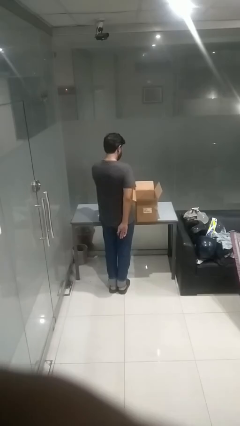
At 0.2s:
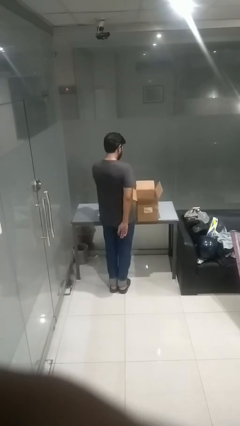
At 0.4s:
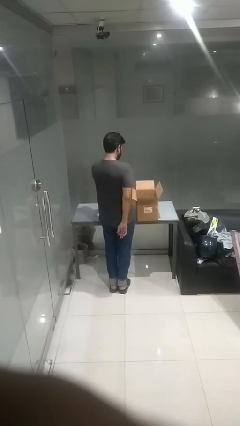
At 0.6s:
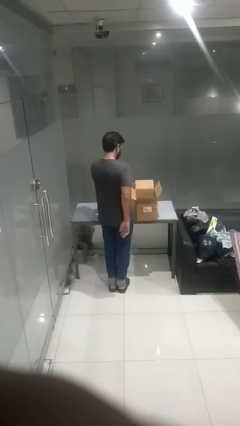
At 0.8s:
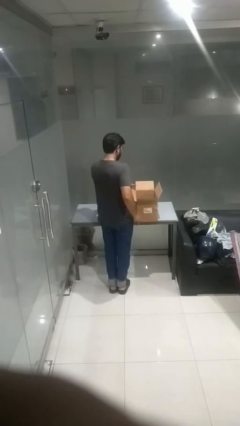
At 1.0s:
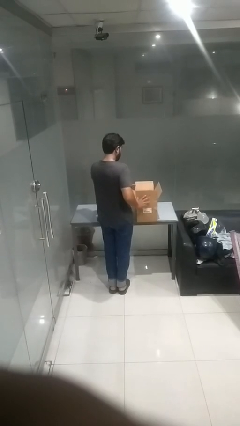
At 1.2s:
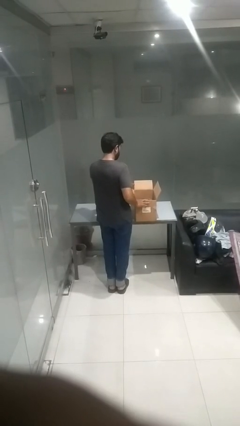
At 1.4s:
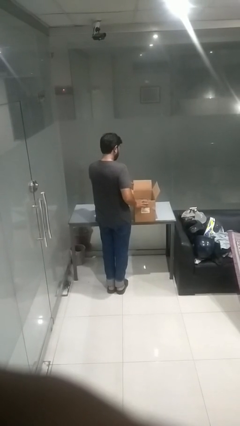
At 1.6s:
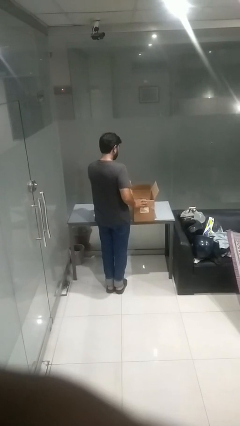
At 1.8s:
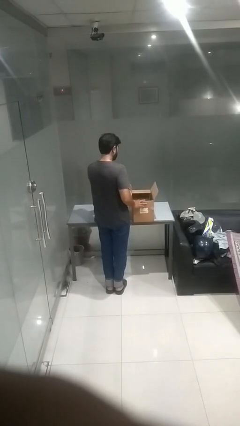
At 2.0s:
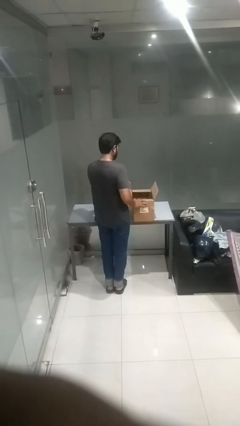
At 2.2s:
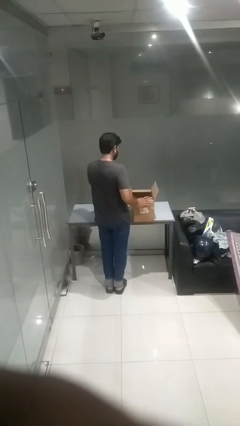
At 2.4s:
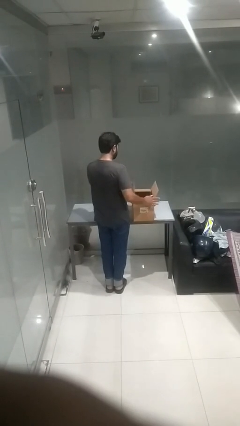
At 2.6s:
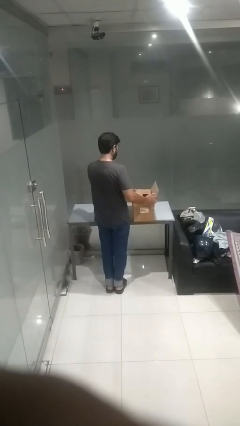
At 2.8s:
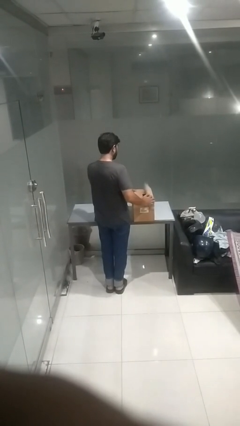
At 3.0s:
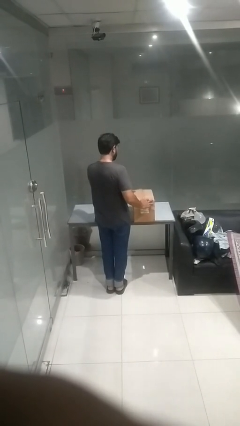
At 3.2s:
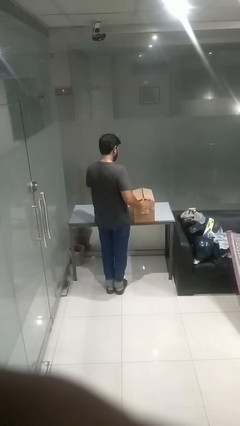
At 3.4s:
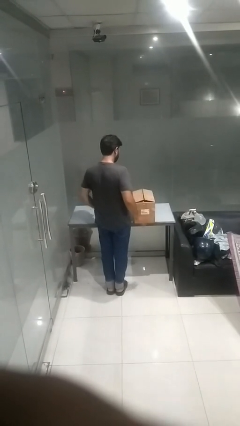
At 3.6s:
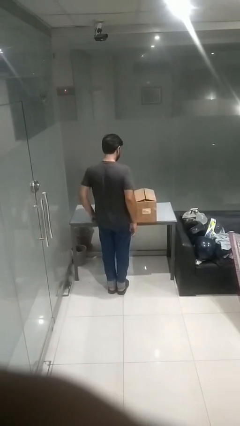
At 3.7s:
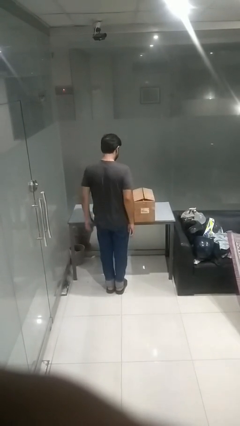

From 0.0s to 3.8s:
person closes box

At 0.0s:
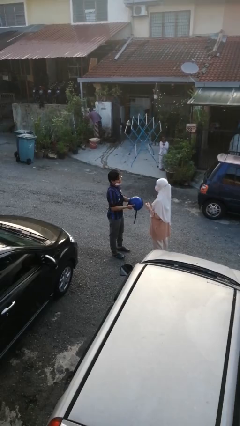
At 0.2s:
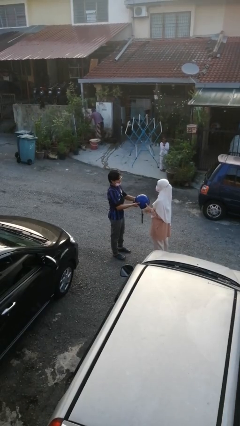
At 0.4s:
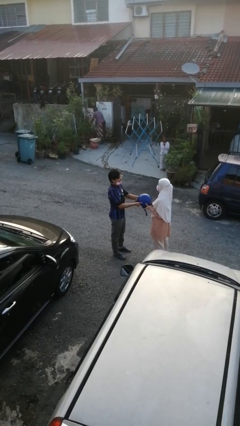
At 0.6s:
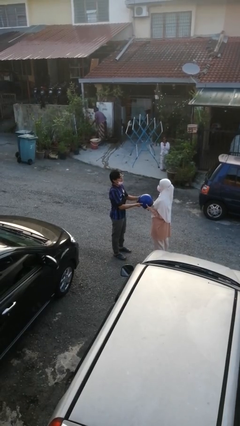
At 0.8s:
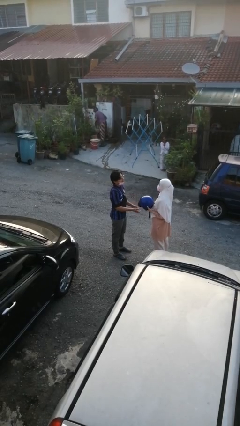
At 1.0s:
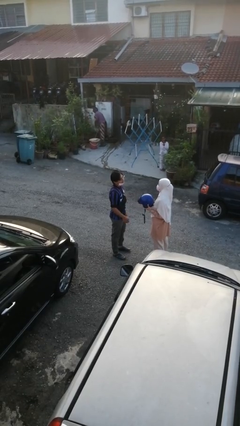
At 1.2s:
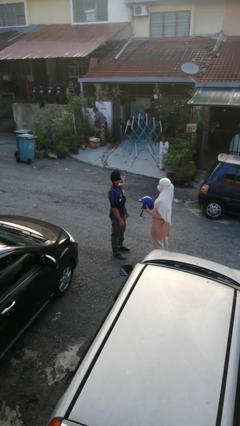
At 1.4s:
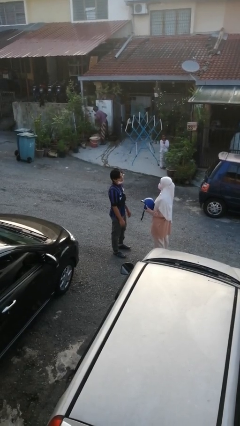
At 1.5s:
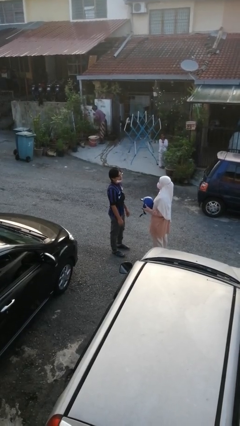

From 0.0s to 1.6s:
person transfers object to person

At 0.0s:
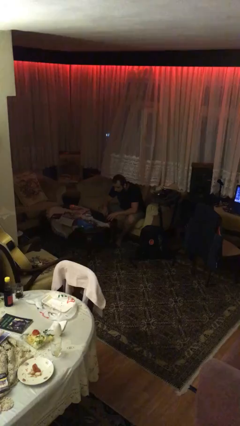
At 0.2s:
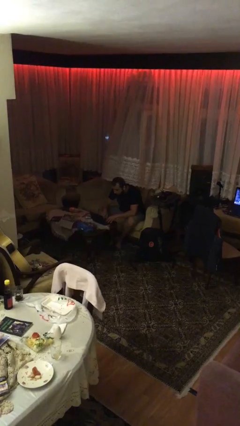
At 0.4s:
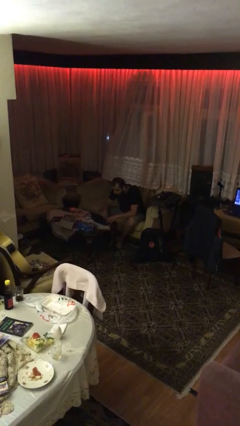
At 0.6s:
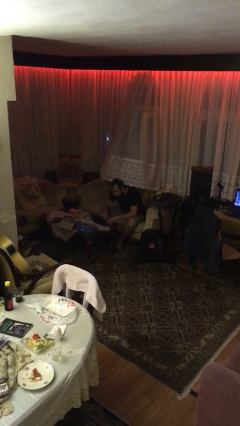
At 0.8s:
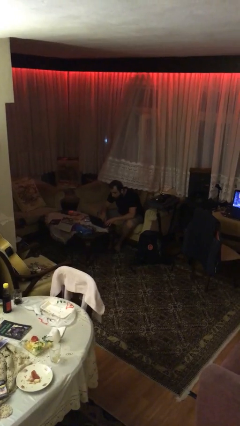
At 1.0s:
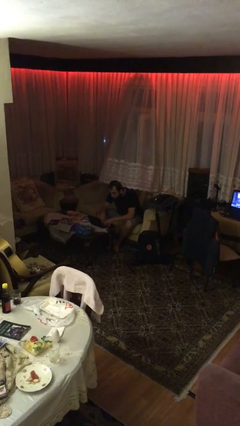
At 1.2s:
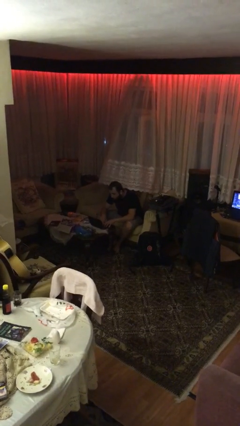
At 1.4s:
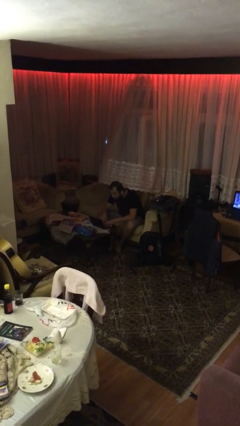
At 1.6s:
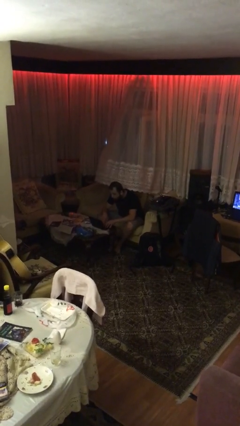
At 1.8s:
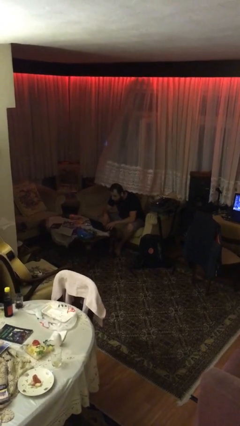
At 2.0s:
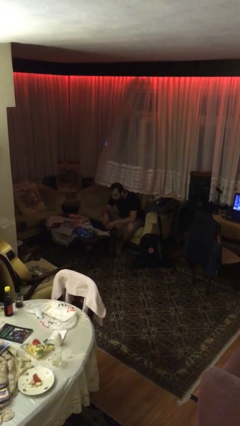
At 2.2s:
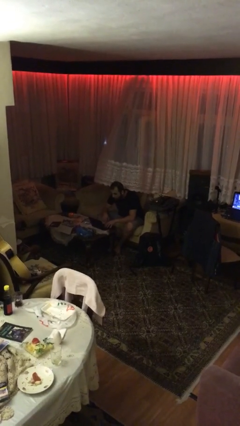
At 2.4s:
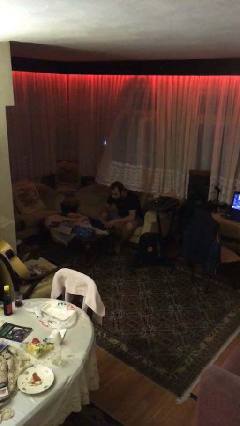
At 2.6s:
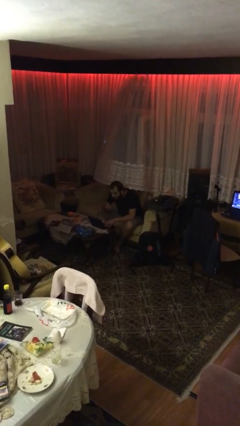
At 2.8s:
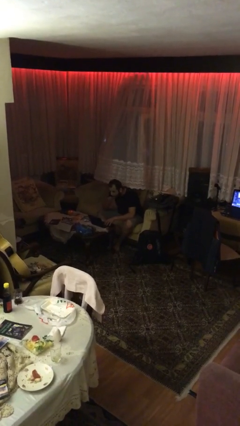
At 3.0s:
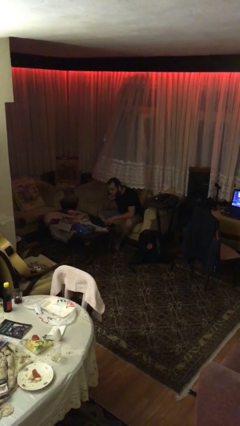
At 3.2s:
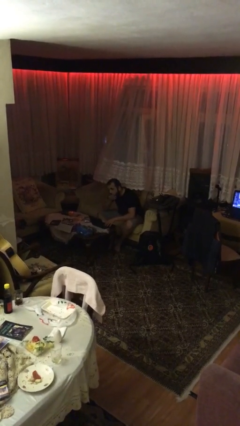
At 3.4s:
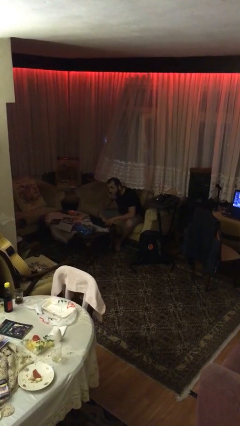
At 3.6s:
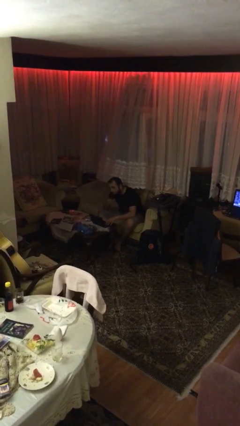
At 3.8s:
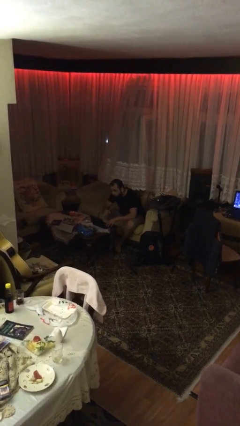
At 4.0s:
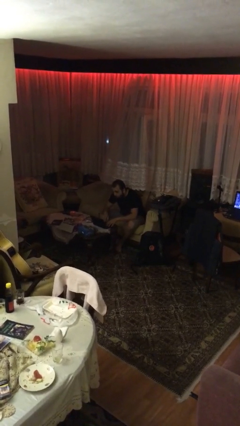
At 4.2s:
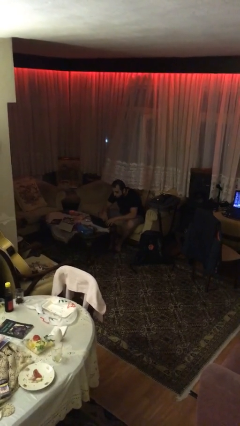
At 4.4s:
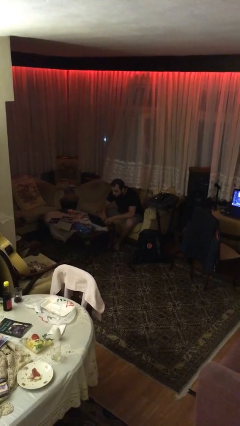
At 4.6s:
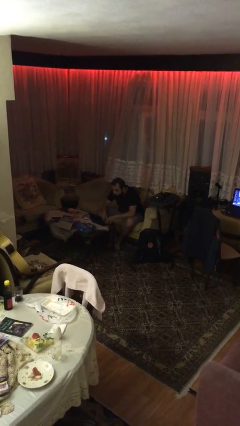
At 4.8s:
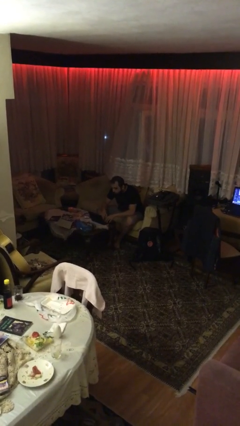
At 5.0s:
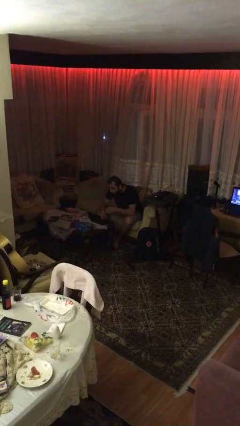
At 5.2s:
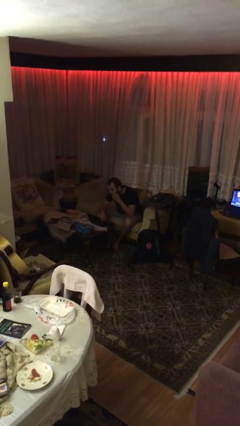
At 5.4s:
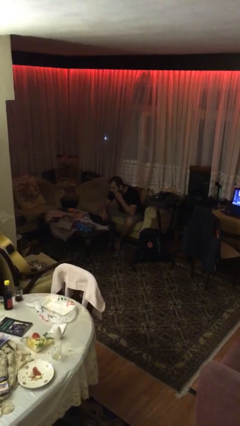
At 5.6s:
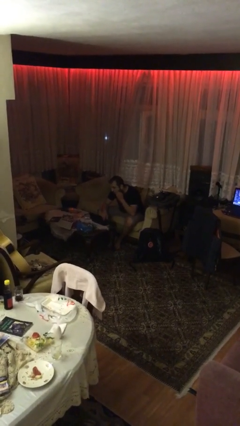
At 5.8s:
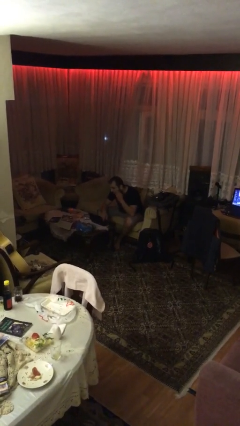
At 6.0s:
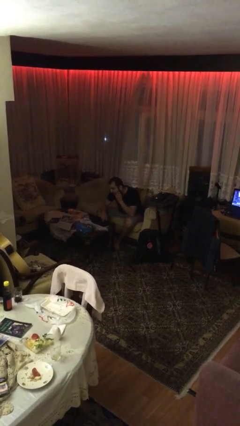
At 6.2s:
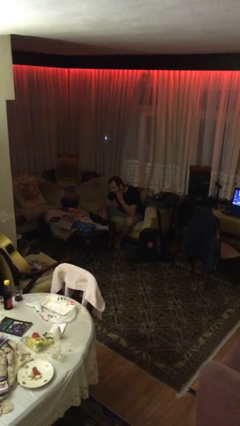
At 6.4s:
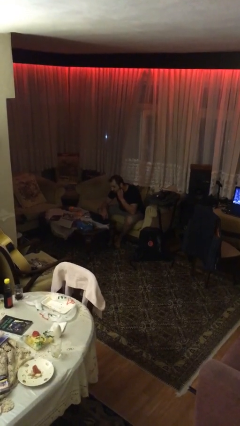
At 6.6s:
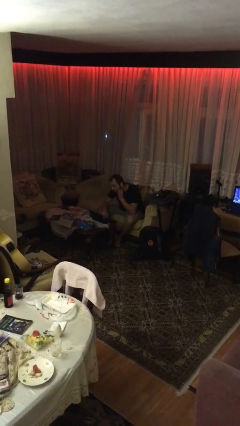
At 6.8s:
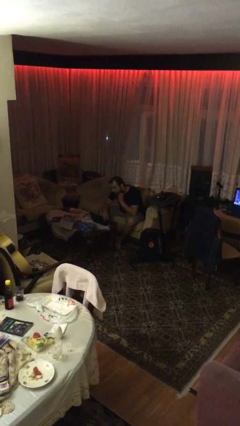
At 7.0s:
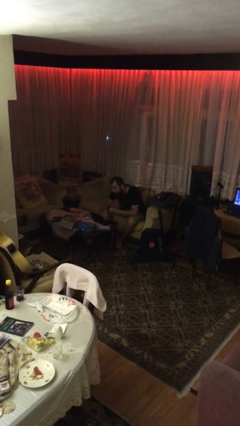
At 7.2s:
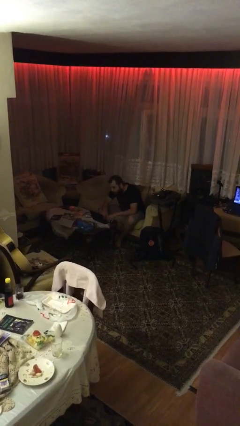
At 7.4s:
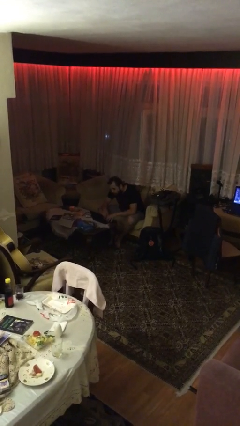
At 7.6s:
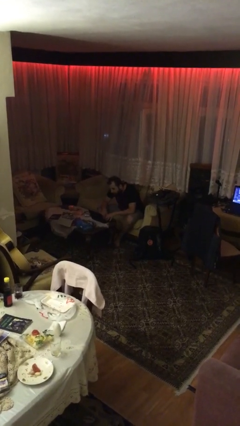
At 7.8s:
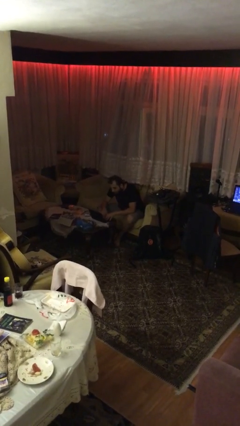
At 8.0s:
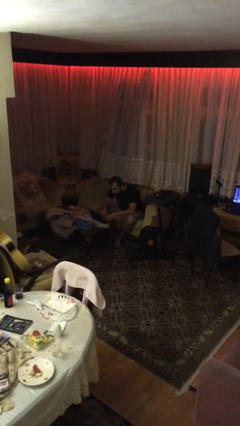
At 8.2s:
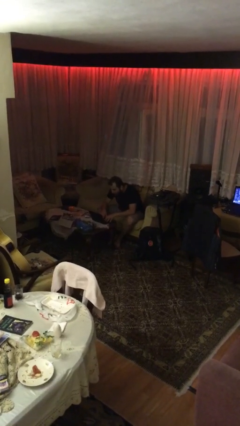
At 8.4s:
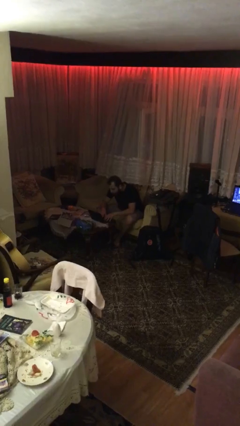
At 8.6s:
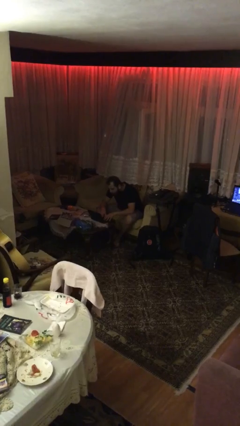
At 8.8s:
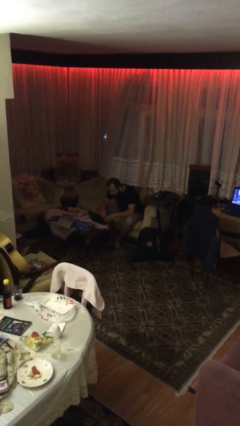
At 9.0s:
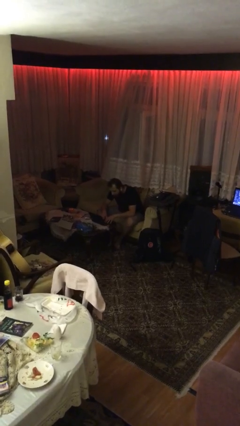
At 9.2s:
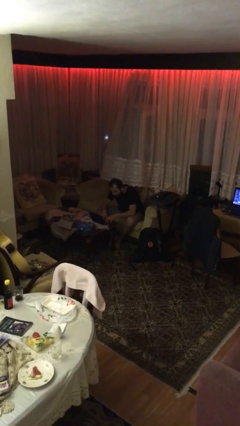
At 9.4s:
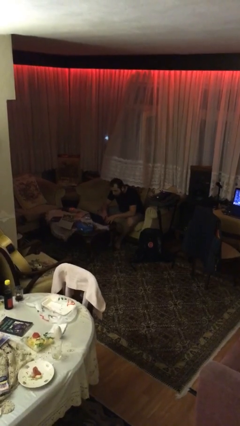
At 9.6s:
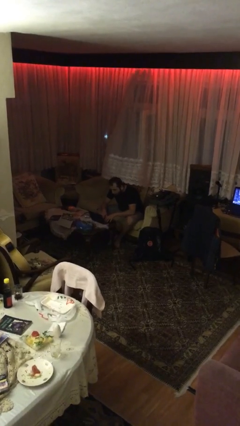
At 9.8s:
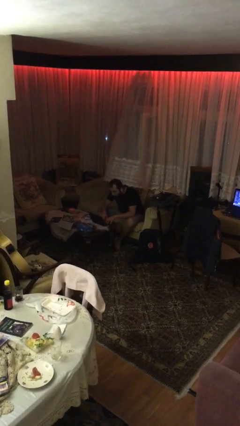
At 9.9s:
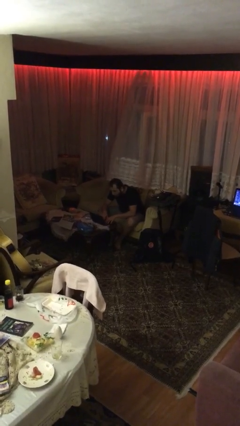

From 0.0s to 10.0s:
person interacts with laptop

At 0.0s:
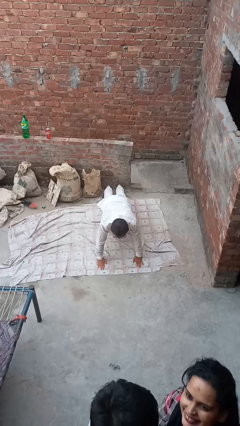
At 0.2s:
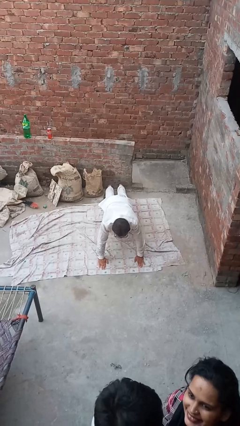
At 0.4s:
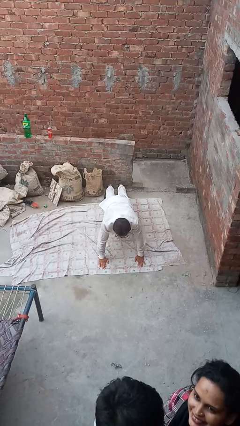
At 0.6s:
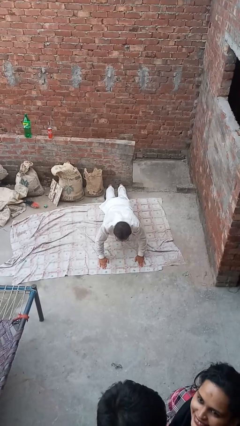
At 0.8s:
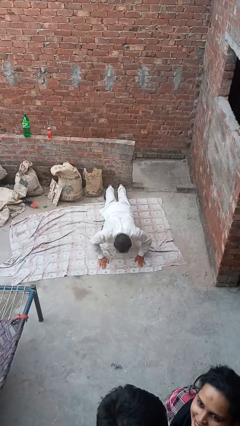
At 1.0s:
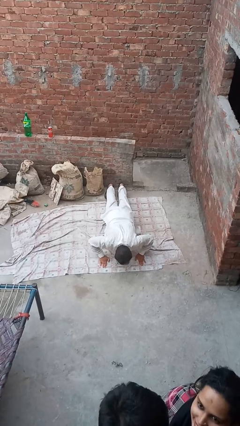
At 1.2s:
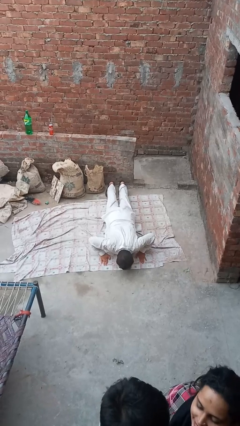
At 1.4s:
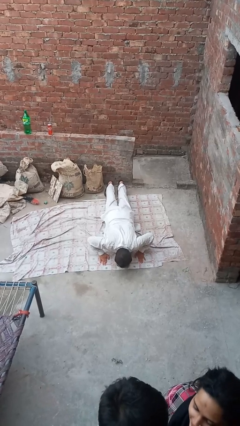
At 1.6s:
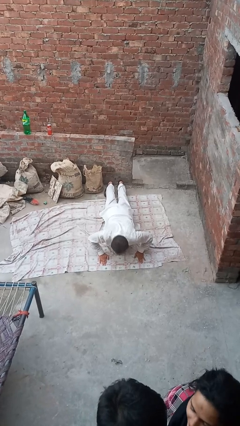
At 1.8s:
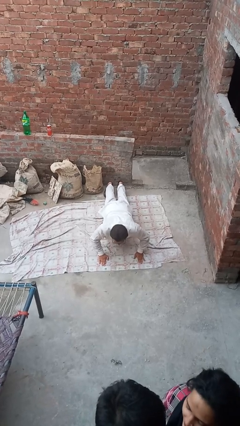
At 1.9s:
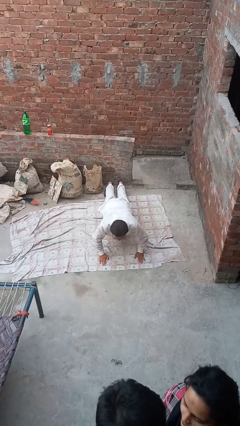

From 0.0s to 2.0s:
person exercises with pushup
